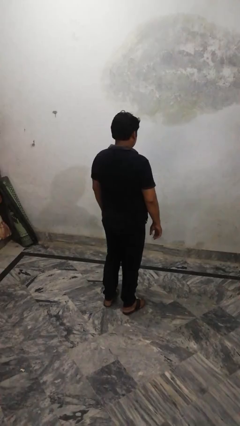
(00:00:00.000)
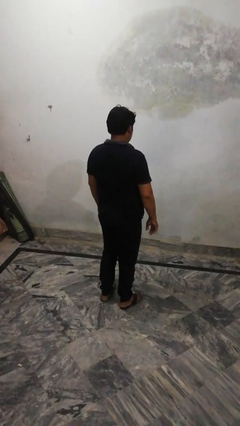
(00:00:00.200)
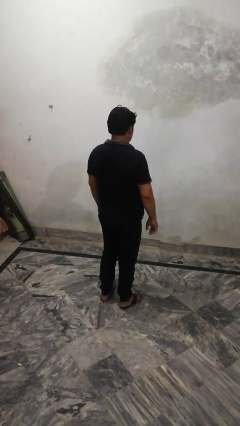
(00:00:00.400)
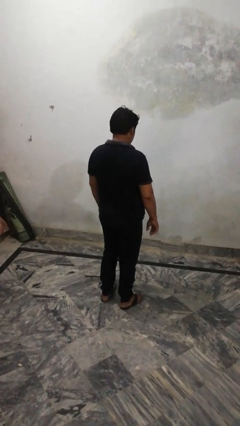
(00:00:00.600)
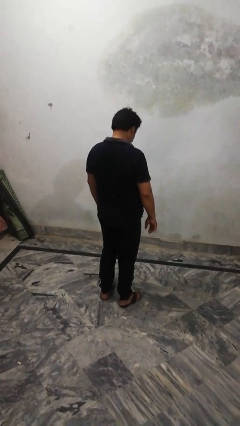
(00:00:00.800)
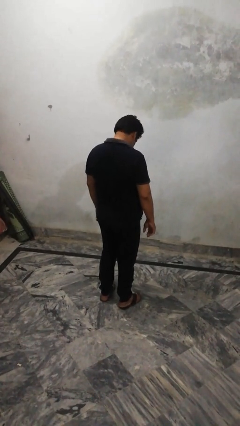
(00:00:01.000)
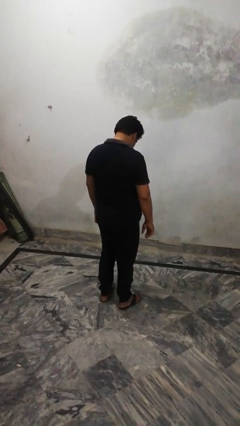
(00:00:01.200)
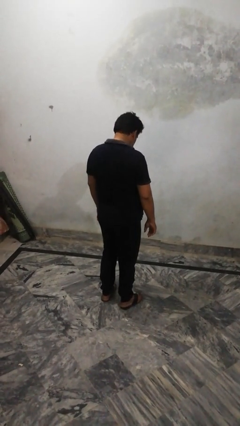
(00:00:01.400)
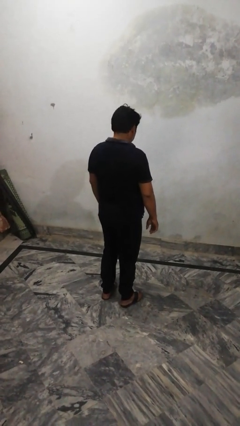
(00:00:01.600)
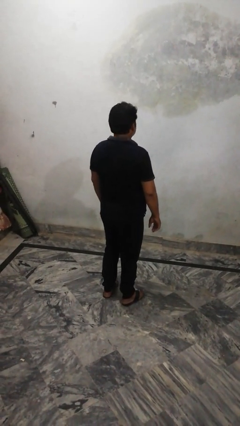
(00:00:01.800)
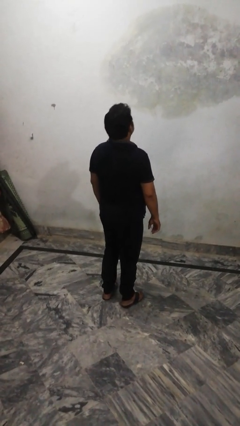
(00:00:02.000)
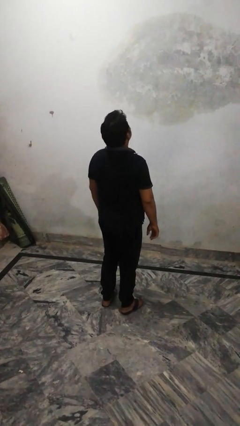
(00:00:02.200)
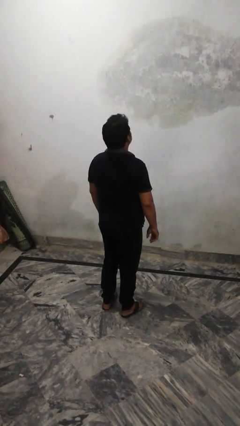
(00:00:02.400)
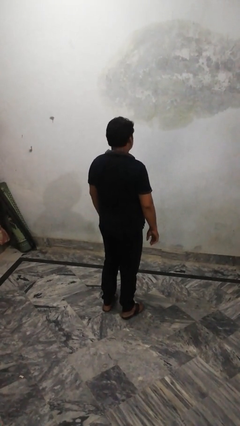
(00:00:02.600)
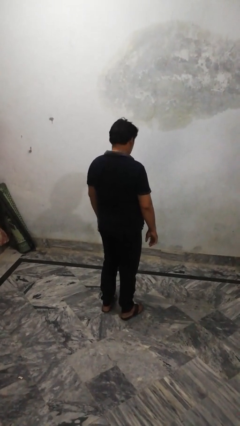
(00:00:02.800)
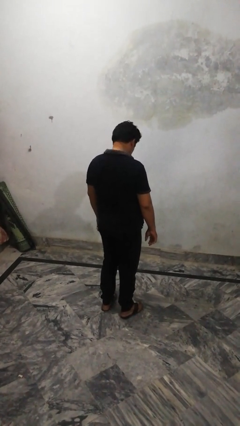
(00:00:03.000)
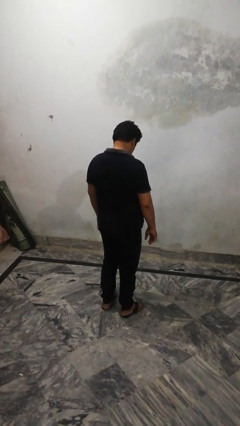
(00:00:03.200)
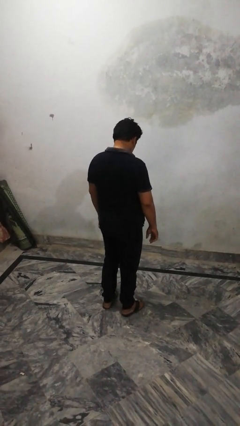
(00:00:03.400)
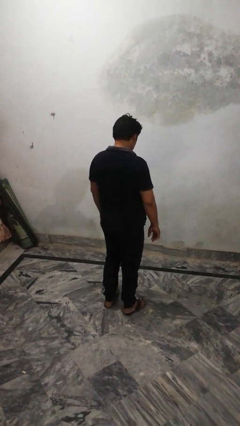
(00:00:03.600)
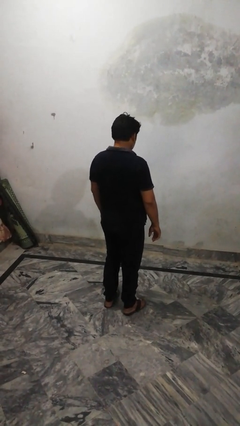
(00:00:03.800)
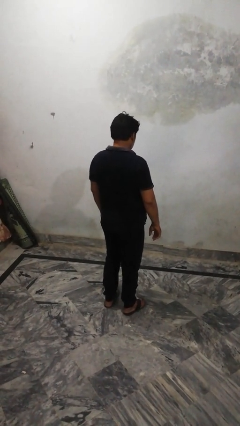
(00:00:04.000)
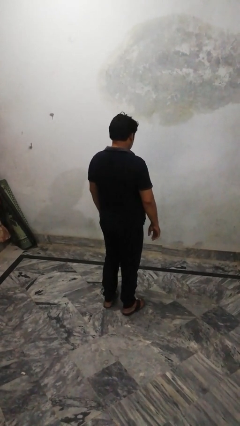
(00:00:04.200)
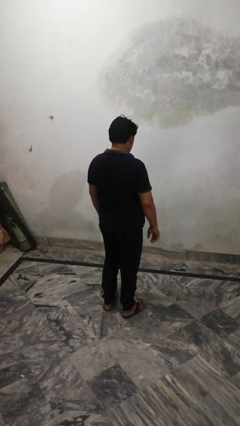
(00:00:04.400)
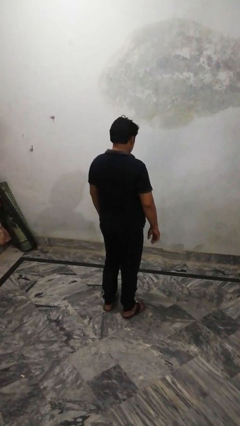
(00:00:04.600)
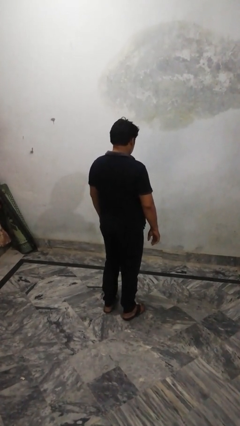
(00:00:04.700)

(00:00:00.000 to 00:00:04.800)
person nods head

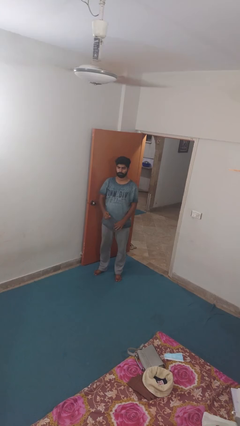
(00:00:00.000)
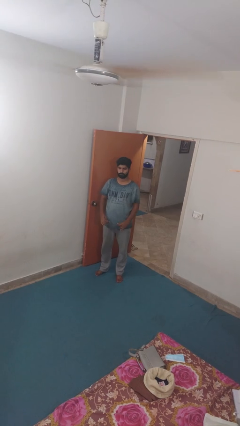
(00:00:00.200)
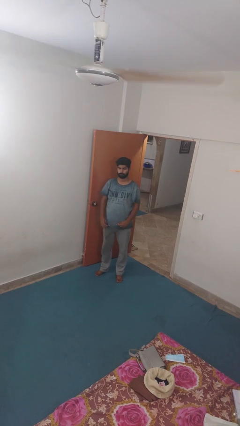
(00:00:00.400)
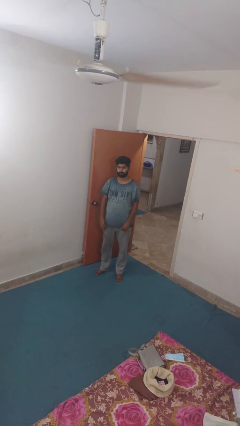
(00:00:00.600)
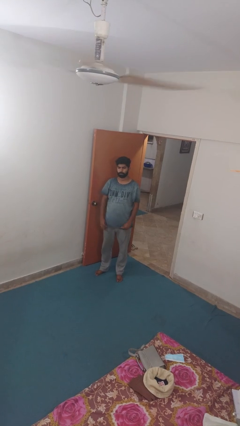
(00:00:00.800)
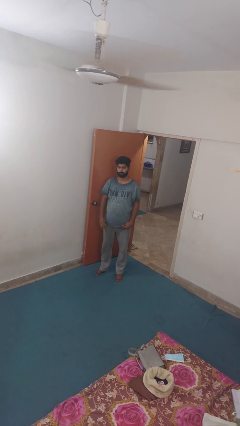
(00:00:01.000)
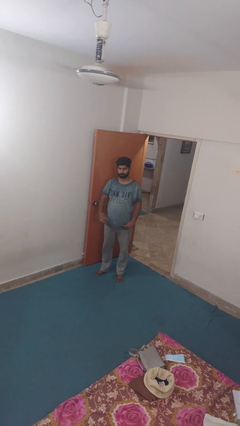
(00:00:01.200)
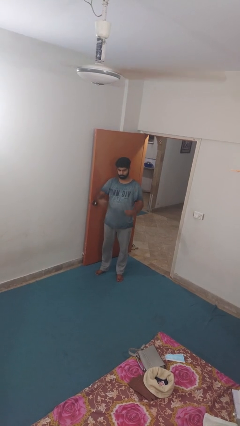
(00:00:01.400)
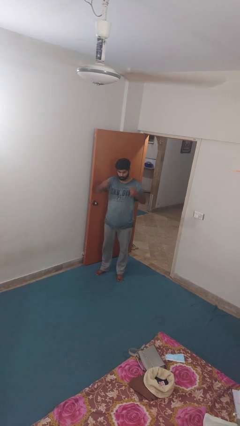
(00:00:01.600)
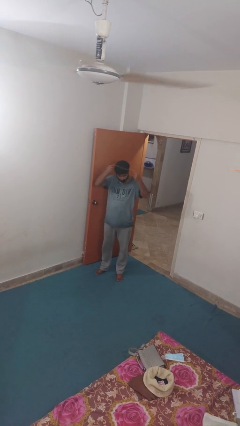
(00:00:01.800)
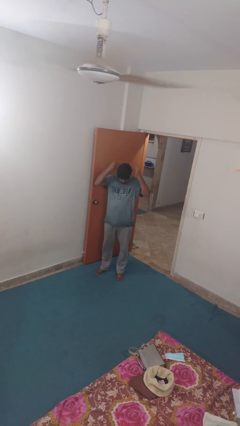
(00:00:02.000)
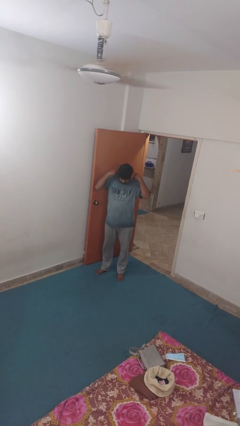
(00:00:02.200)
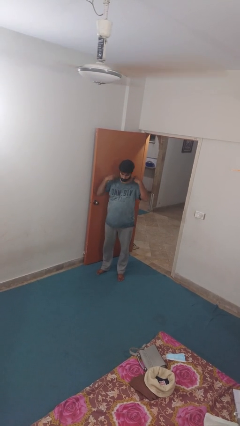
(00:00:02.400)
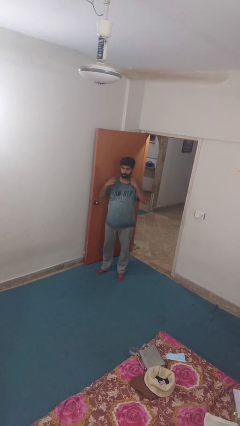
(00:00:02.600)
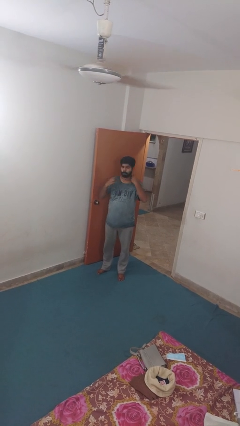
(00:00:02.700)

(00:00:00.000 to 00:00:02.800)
person puts on necklace

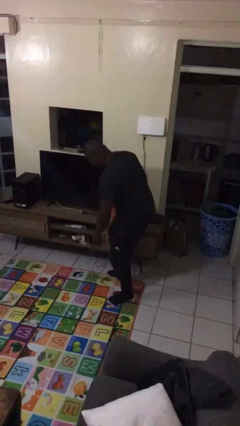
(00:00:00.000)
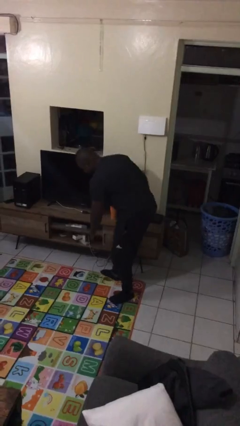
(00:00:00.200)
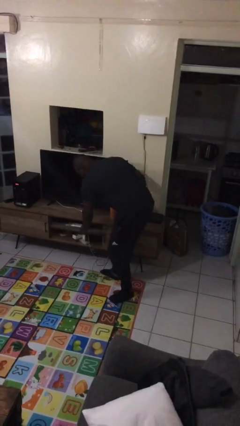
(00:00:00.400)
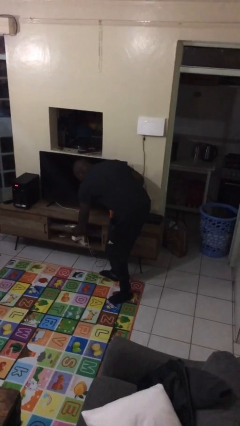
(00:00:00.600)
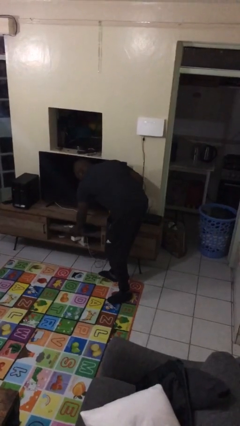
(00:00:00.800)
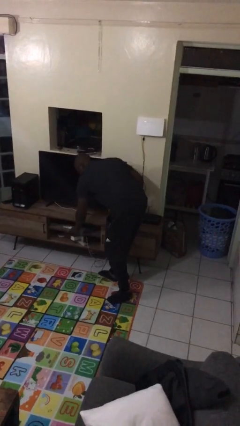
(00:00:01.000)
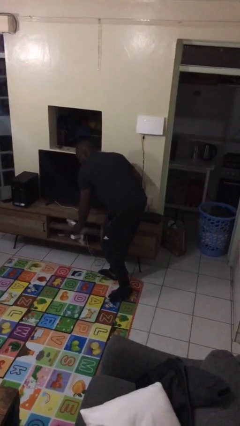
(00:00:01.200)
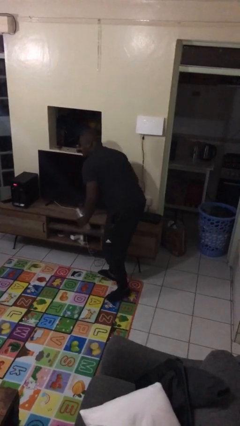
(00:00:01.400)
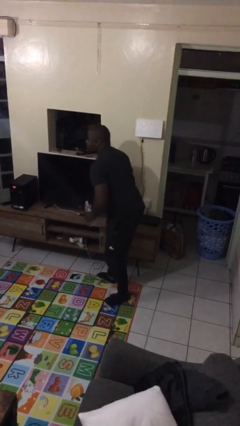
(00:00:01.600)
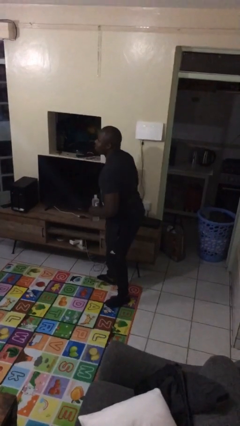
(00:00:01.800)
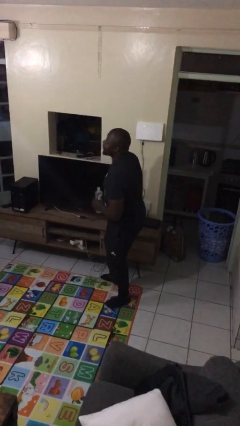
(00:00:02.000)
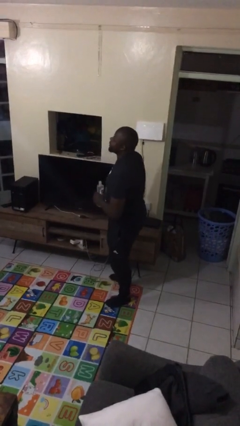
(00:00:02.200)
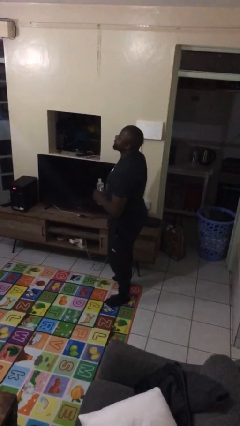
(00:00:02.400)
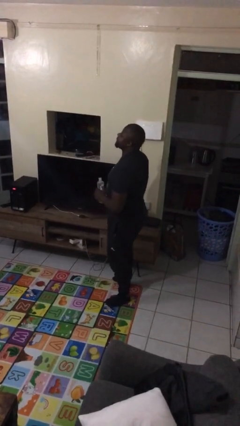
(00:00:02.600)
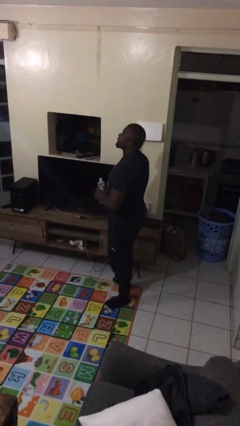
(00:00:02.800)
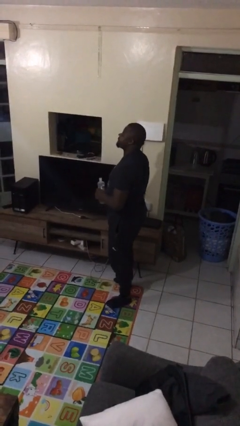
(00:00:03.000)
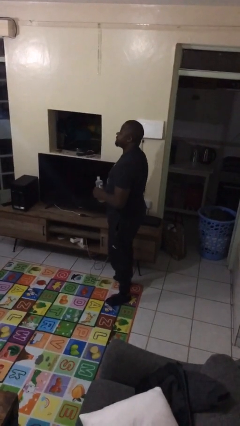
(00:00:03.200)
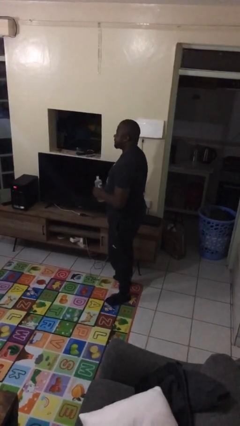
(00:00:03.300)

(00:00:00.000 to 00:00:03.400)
person picks up object from cabinet

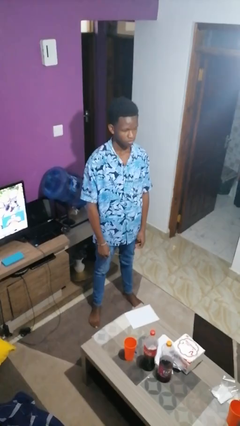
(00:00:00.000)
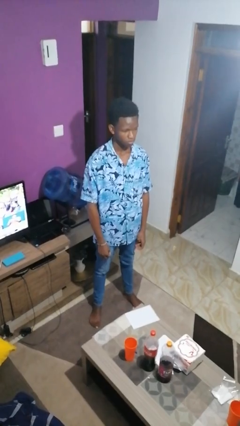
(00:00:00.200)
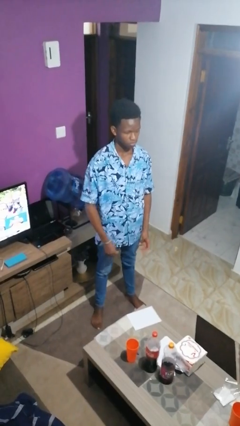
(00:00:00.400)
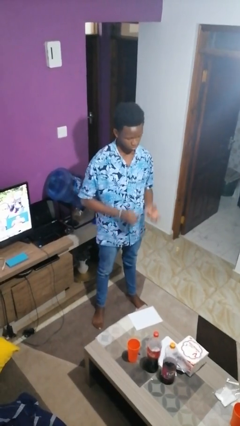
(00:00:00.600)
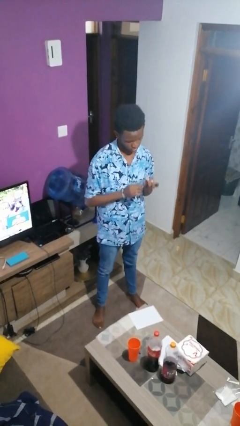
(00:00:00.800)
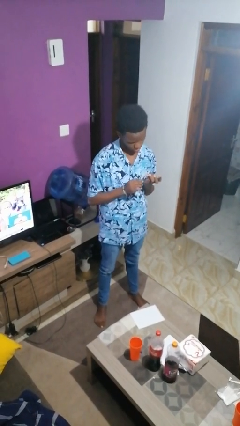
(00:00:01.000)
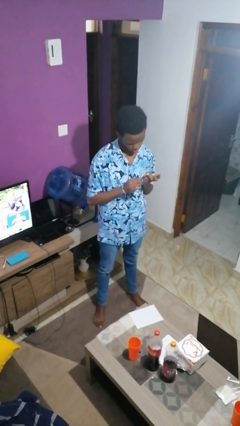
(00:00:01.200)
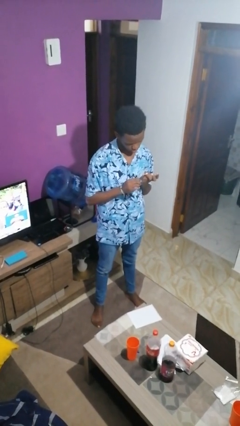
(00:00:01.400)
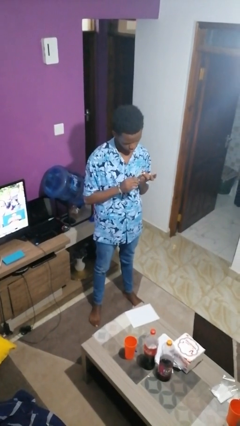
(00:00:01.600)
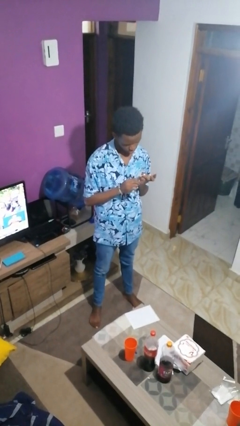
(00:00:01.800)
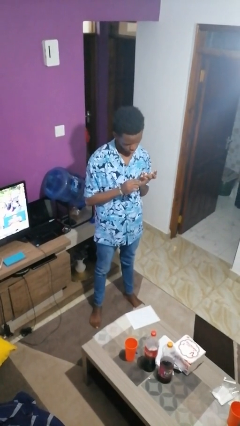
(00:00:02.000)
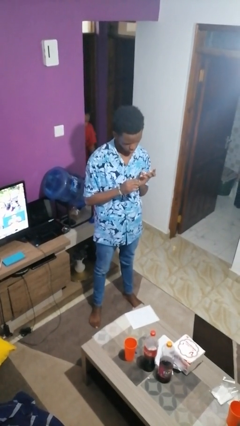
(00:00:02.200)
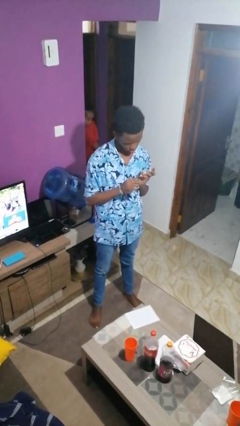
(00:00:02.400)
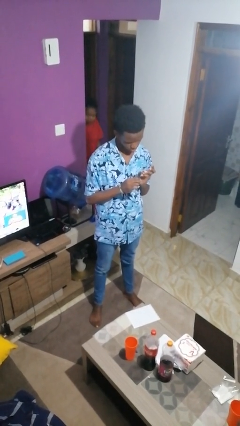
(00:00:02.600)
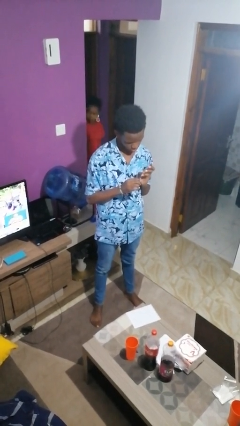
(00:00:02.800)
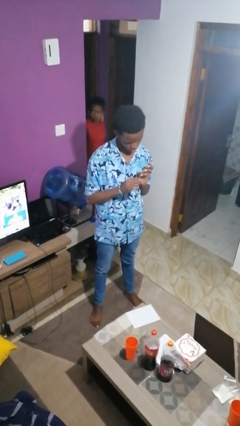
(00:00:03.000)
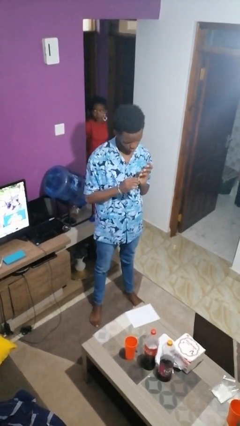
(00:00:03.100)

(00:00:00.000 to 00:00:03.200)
person files fingernails

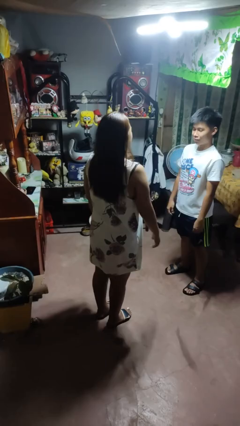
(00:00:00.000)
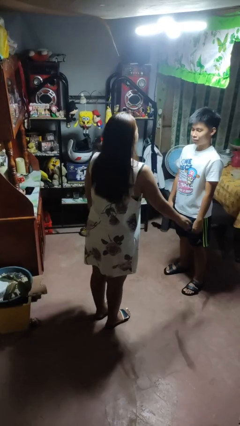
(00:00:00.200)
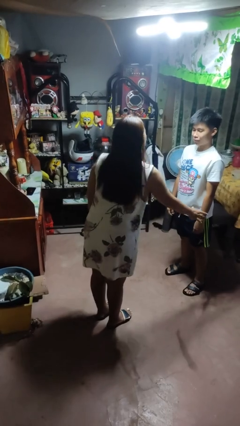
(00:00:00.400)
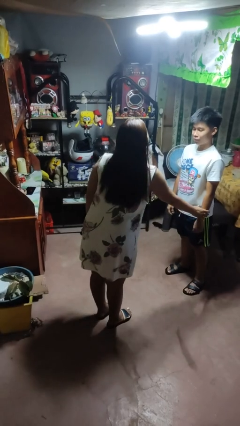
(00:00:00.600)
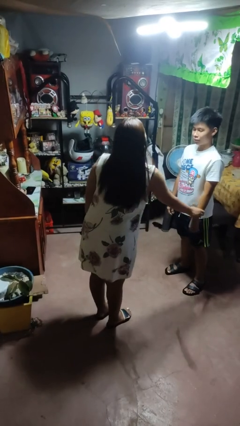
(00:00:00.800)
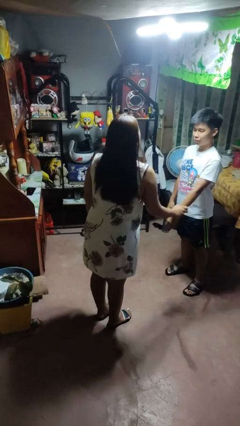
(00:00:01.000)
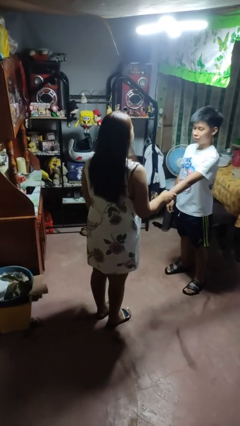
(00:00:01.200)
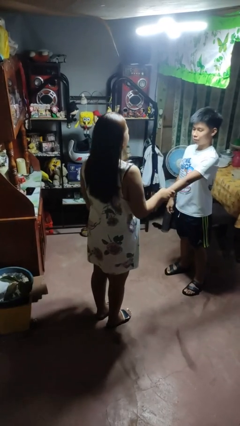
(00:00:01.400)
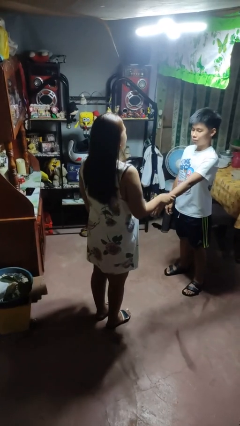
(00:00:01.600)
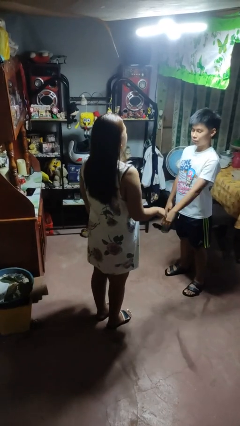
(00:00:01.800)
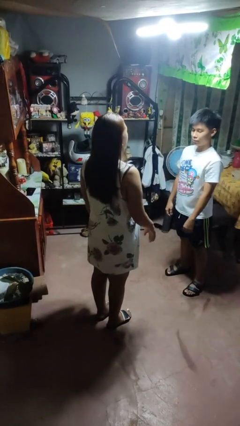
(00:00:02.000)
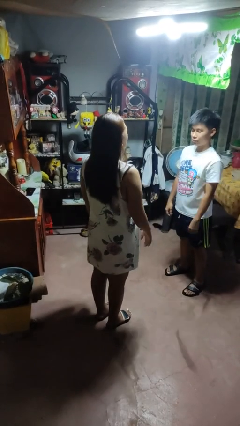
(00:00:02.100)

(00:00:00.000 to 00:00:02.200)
person grabs person by forearm

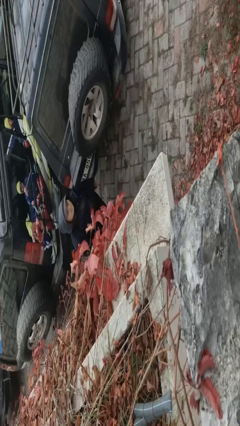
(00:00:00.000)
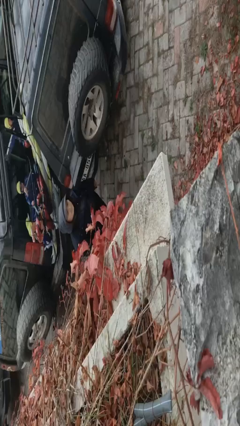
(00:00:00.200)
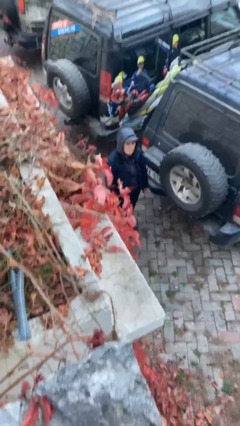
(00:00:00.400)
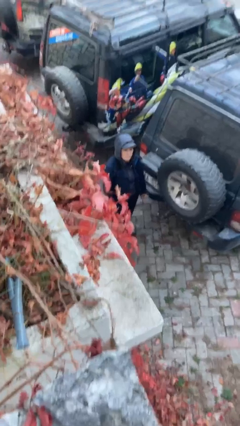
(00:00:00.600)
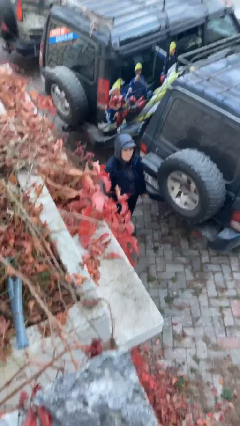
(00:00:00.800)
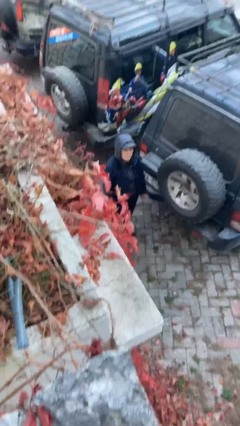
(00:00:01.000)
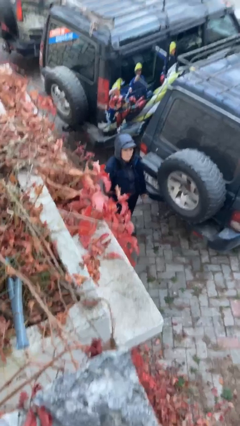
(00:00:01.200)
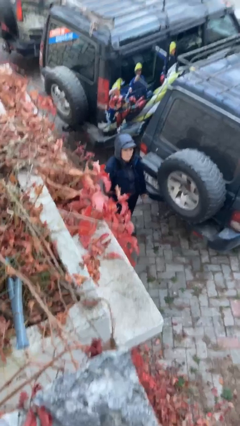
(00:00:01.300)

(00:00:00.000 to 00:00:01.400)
person opens car trunk
